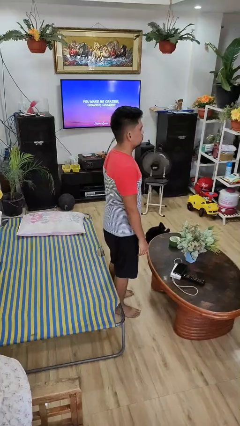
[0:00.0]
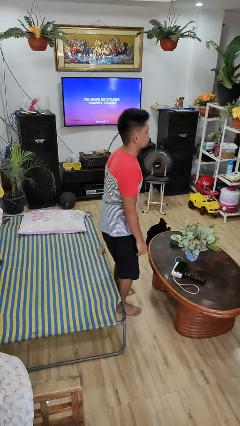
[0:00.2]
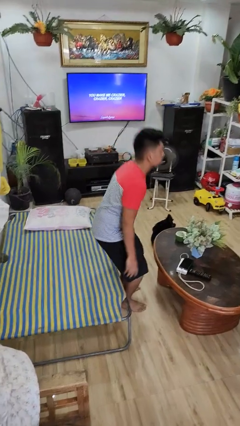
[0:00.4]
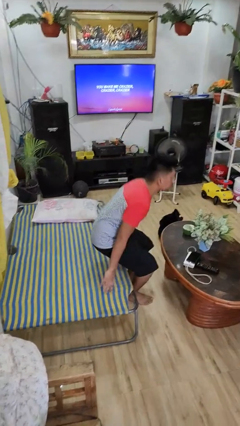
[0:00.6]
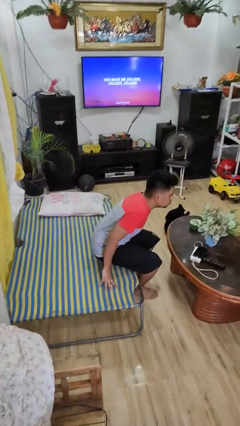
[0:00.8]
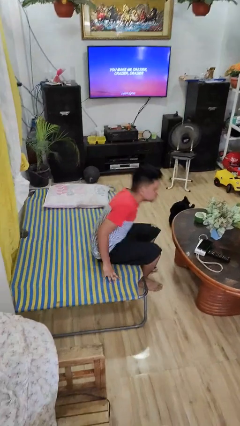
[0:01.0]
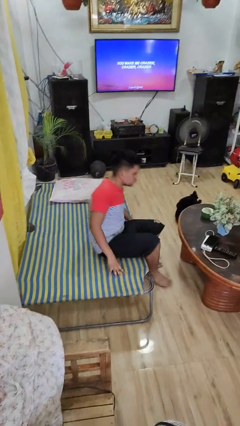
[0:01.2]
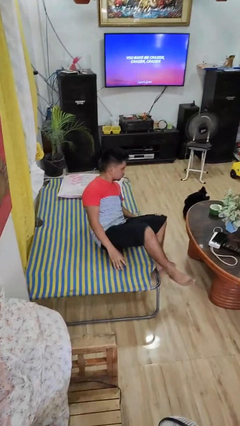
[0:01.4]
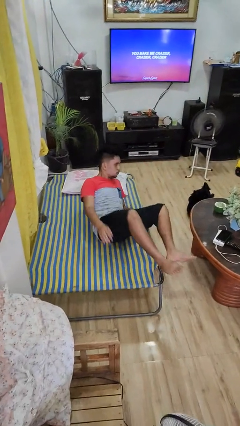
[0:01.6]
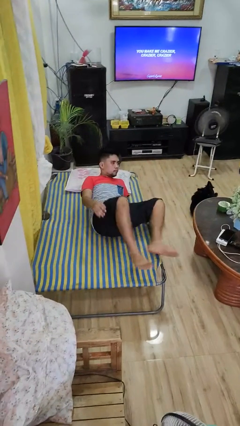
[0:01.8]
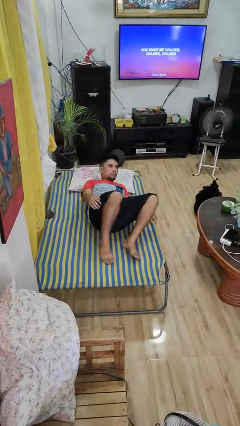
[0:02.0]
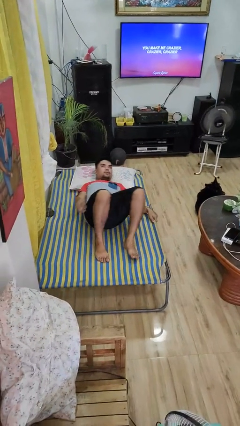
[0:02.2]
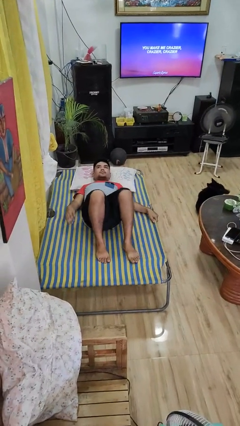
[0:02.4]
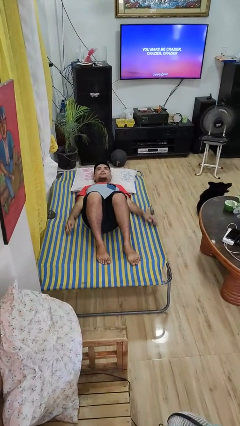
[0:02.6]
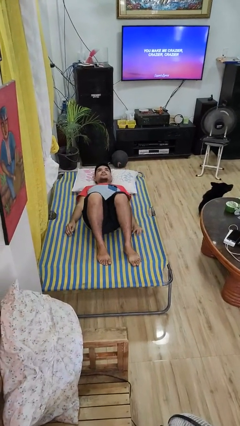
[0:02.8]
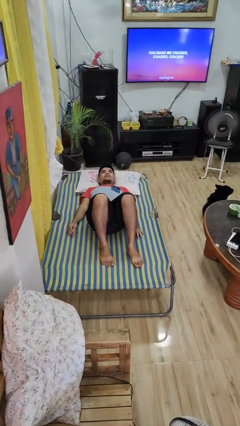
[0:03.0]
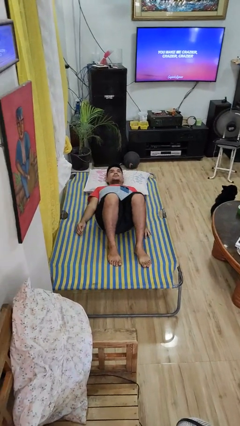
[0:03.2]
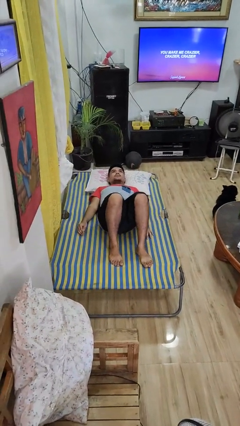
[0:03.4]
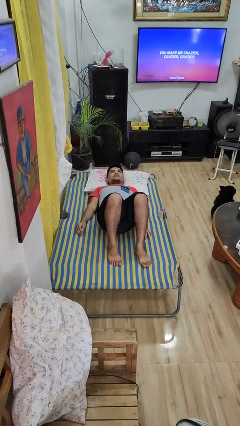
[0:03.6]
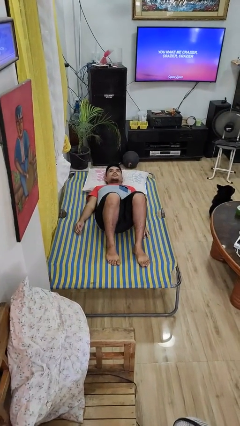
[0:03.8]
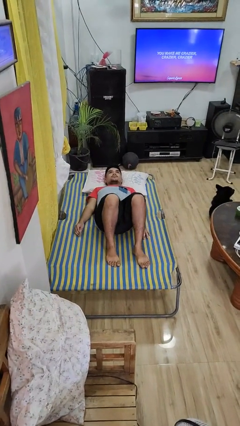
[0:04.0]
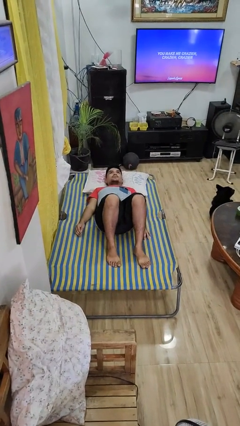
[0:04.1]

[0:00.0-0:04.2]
person lies down on bed

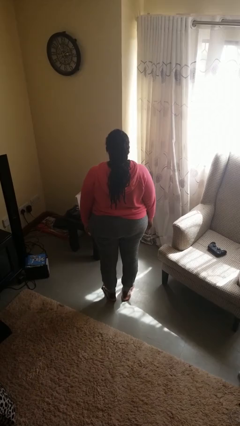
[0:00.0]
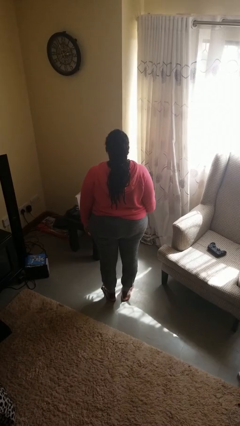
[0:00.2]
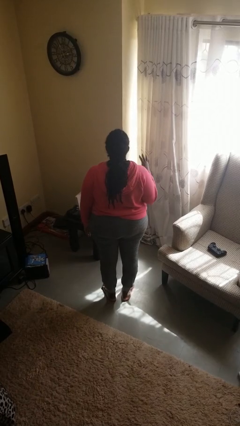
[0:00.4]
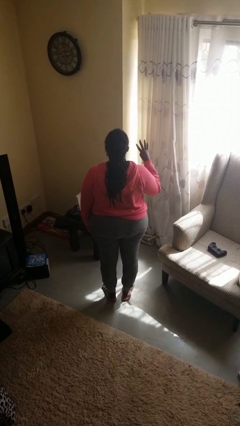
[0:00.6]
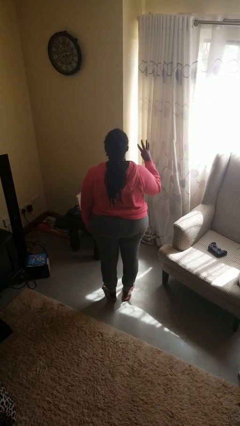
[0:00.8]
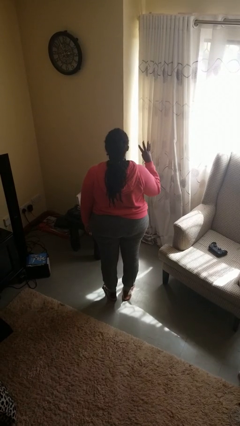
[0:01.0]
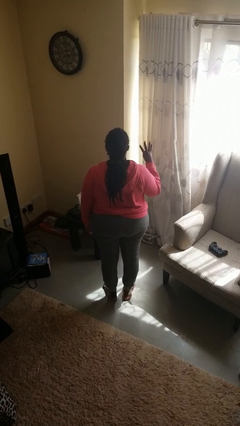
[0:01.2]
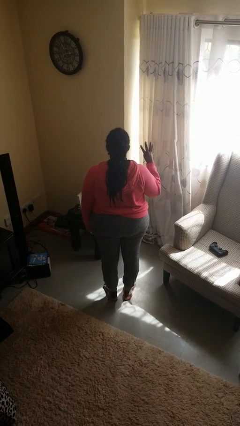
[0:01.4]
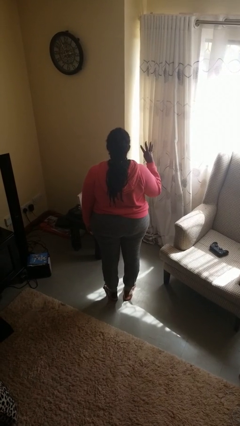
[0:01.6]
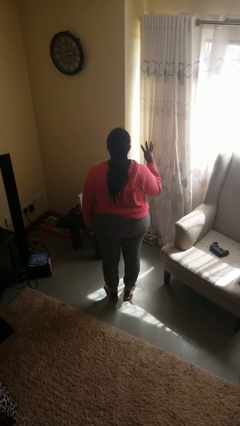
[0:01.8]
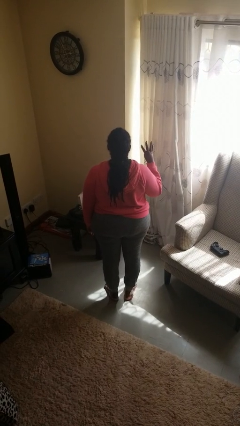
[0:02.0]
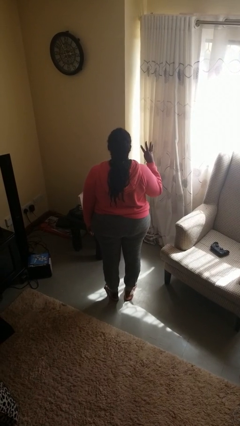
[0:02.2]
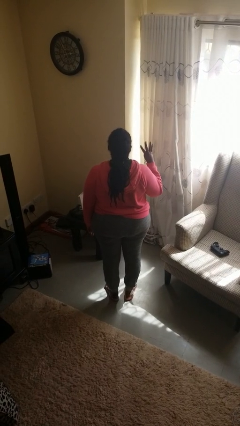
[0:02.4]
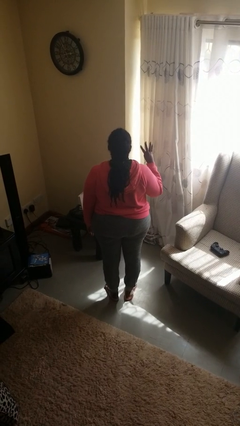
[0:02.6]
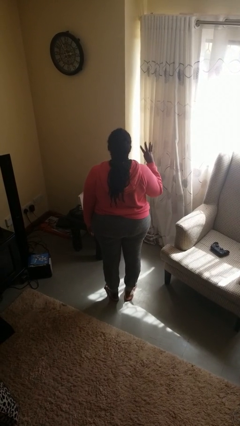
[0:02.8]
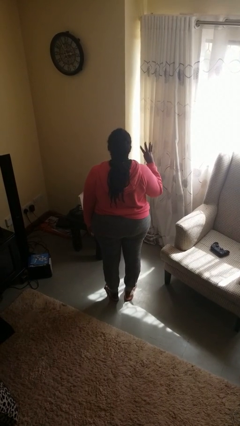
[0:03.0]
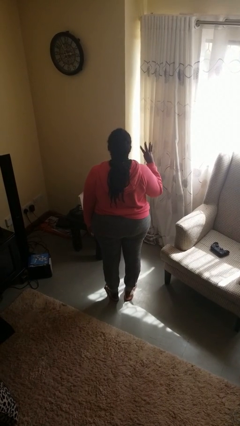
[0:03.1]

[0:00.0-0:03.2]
person gestures number four

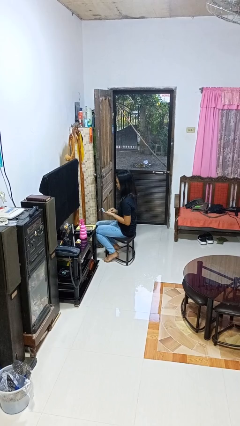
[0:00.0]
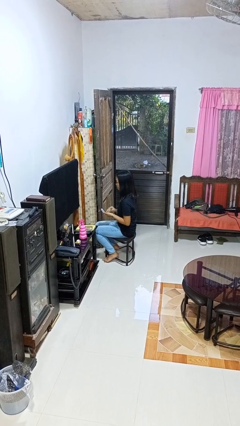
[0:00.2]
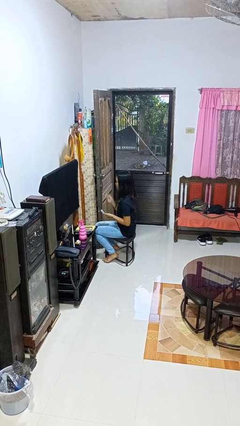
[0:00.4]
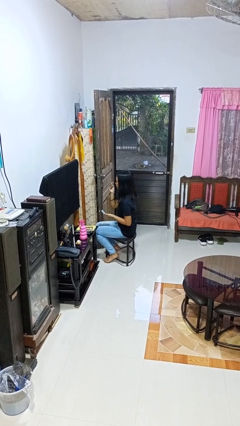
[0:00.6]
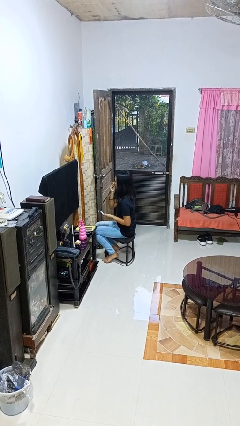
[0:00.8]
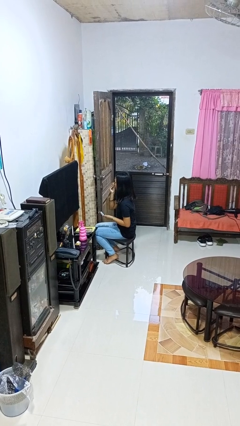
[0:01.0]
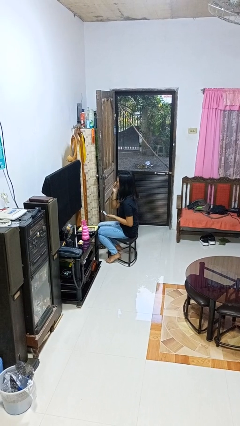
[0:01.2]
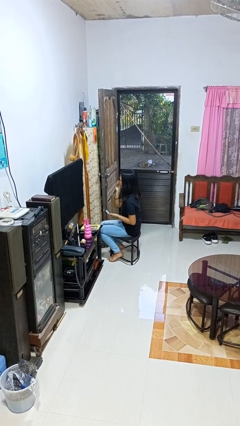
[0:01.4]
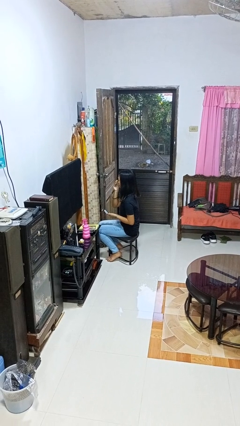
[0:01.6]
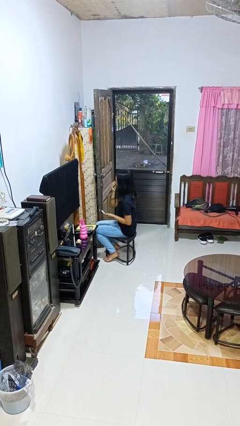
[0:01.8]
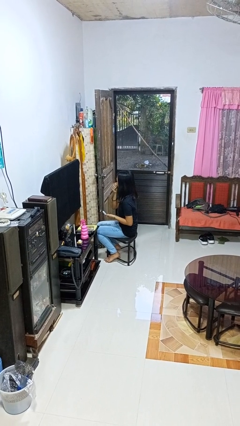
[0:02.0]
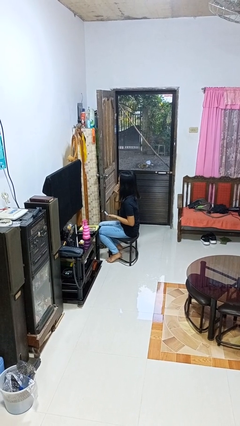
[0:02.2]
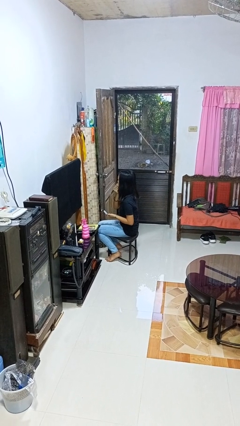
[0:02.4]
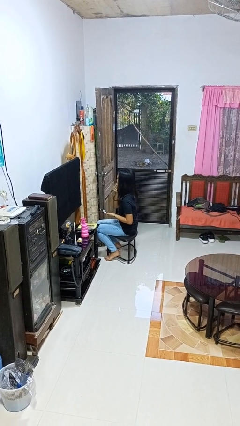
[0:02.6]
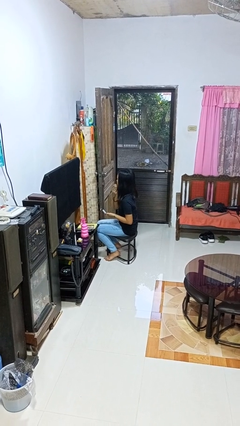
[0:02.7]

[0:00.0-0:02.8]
person applies foundation makeup

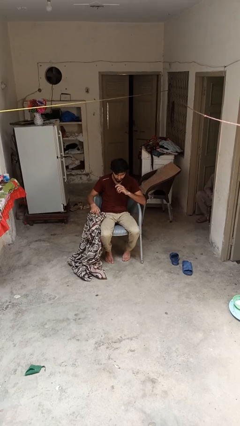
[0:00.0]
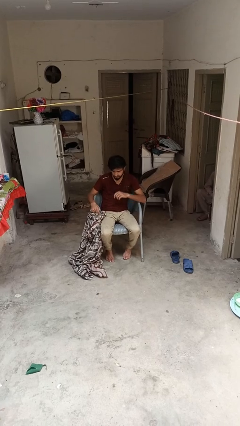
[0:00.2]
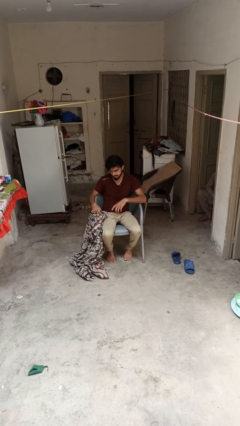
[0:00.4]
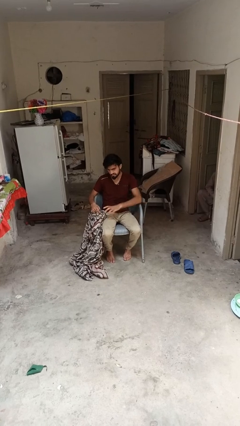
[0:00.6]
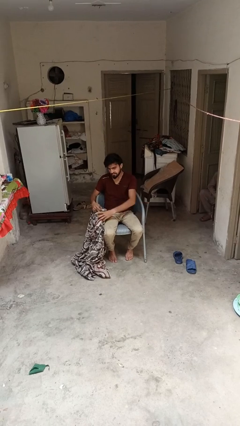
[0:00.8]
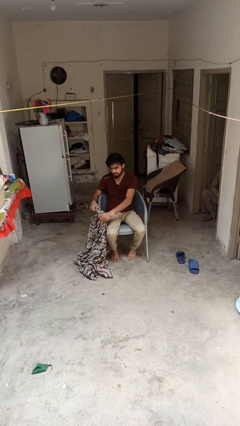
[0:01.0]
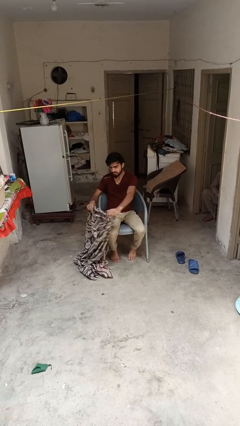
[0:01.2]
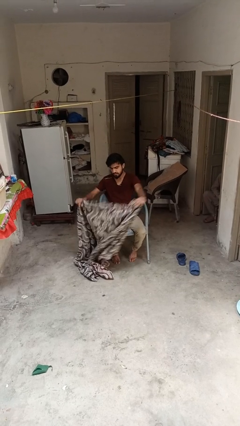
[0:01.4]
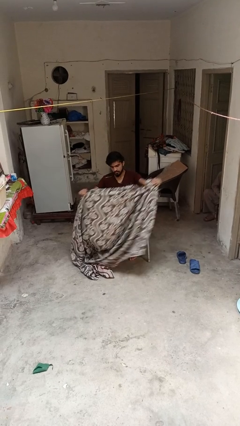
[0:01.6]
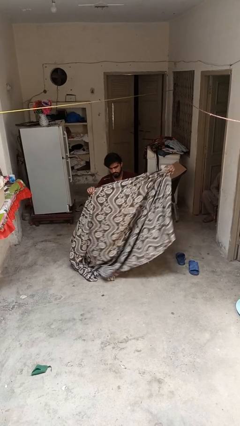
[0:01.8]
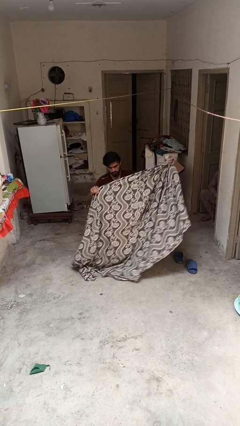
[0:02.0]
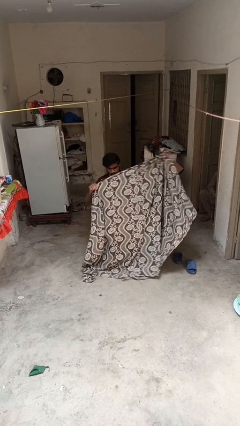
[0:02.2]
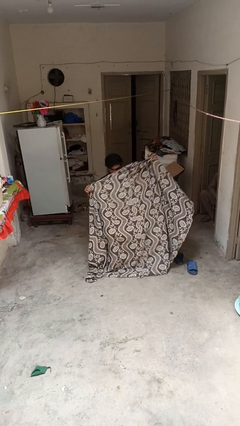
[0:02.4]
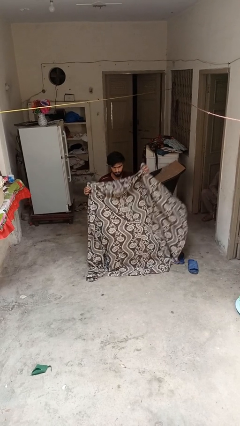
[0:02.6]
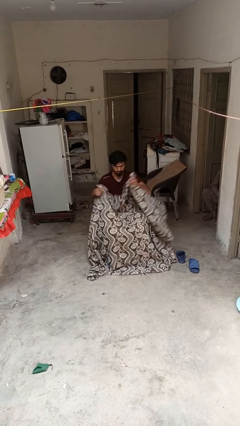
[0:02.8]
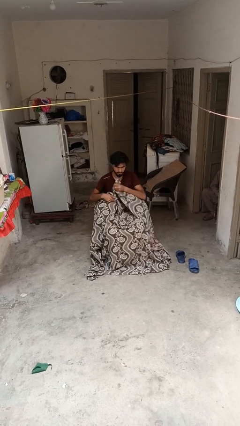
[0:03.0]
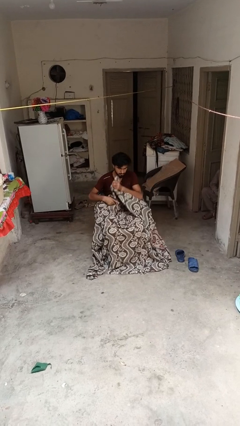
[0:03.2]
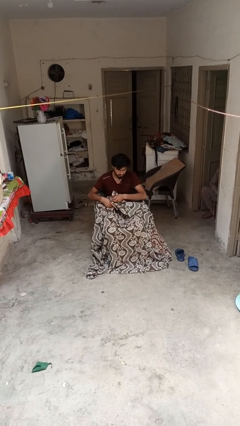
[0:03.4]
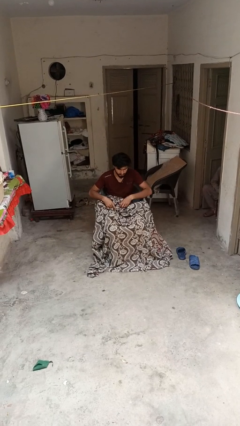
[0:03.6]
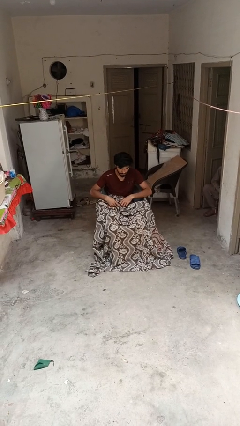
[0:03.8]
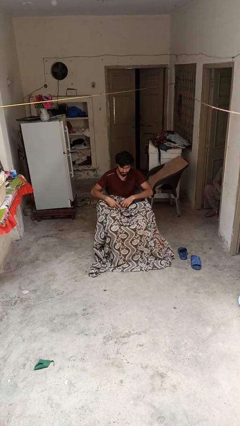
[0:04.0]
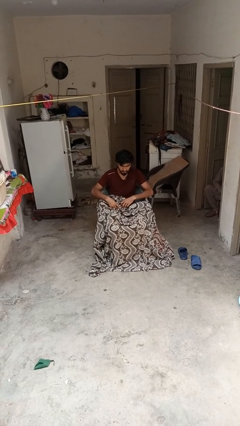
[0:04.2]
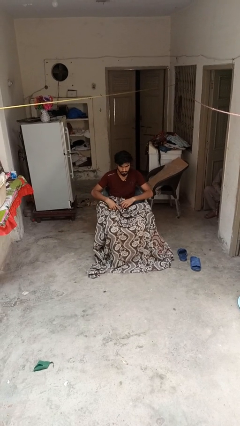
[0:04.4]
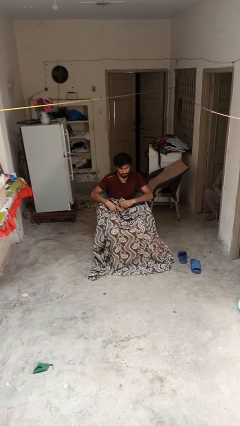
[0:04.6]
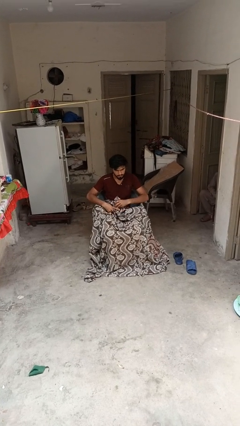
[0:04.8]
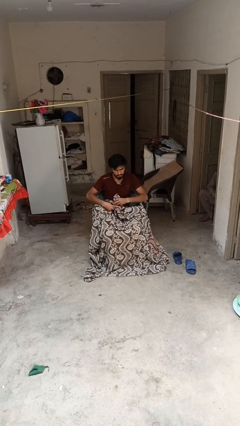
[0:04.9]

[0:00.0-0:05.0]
person covers with blanket

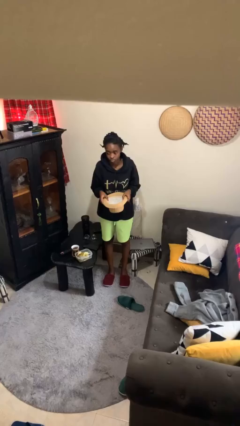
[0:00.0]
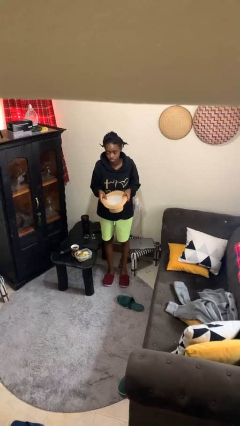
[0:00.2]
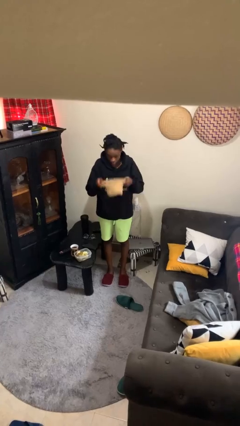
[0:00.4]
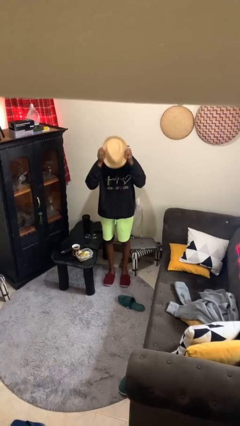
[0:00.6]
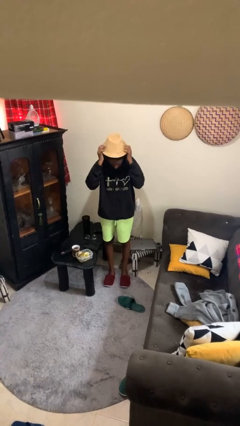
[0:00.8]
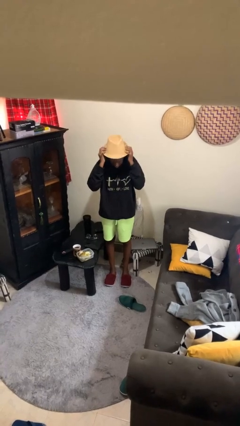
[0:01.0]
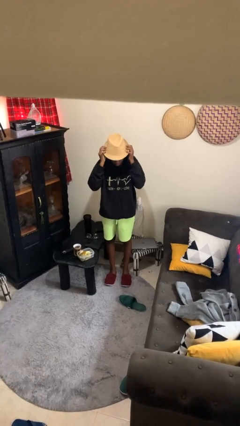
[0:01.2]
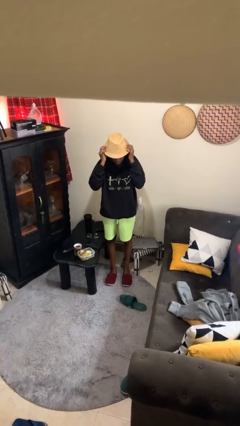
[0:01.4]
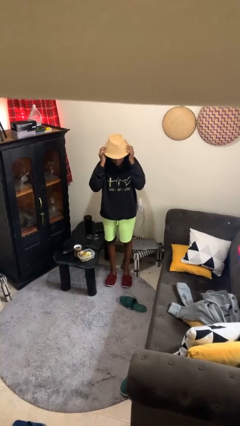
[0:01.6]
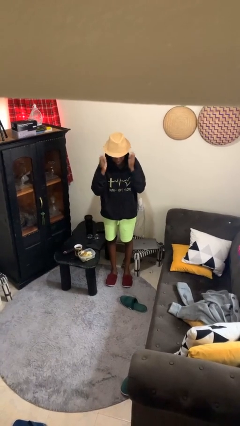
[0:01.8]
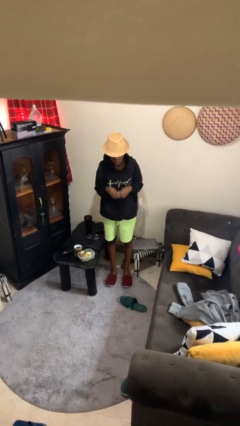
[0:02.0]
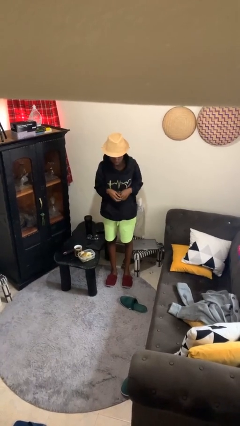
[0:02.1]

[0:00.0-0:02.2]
person puts on hat
